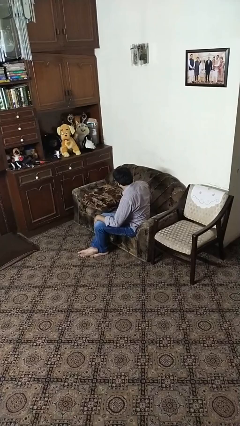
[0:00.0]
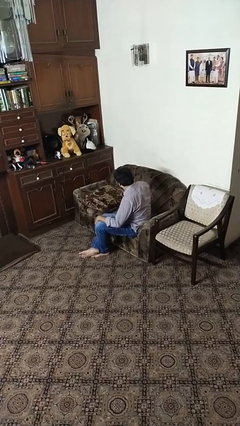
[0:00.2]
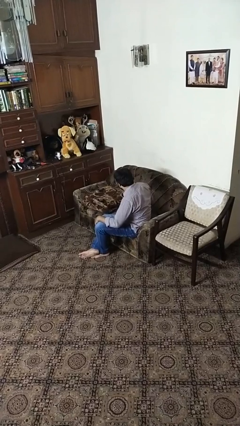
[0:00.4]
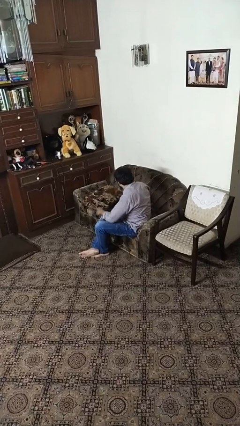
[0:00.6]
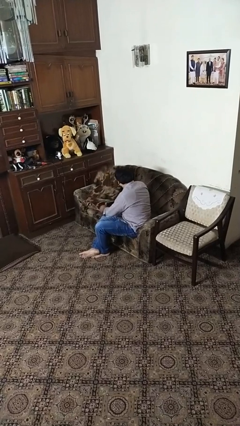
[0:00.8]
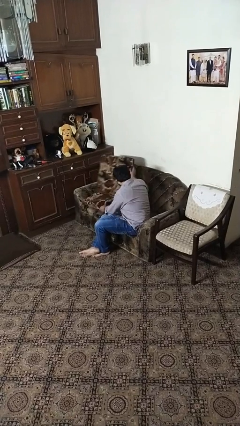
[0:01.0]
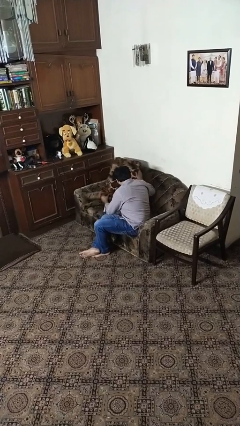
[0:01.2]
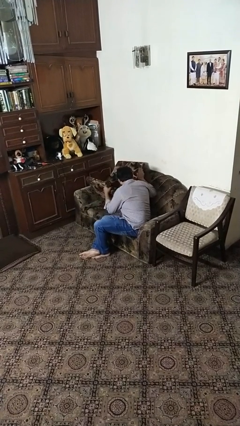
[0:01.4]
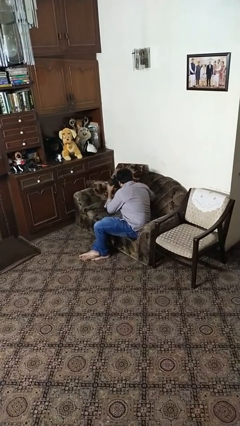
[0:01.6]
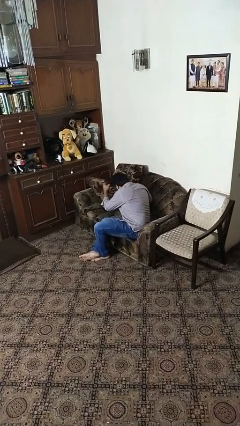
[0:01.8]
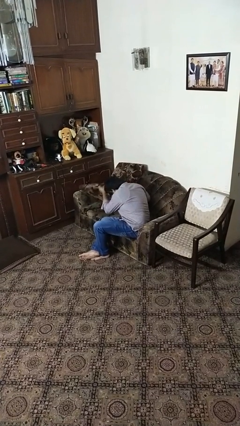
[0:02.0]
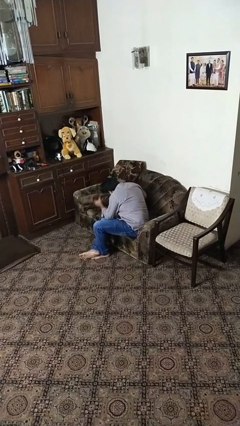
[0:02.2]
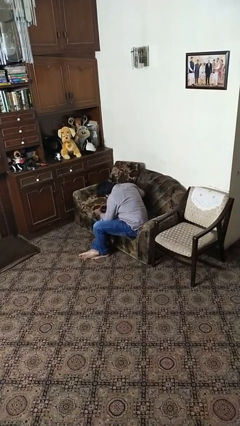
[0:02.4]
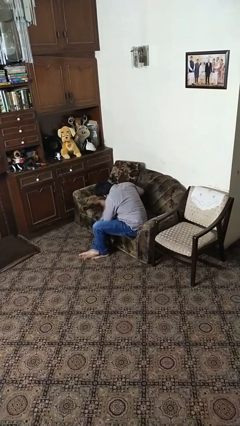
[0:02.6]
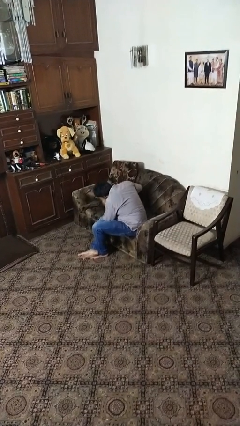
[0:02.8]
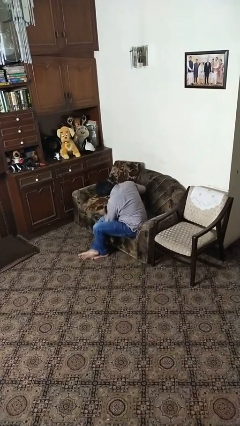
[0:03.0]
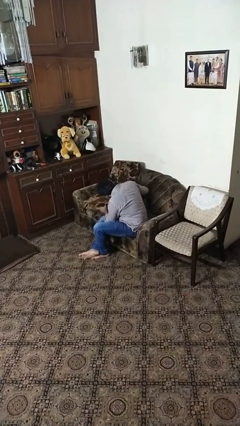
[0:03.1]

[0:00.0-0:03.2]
person searches in couch

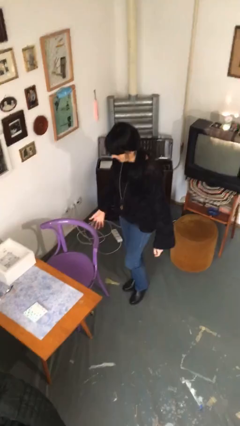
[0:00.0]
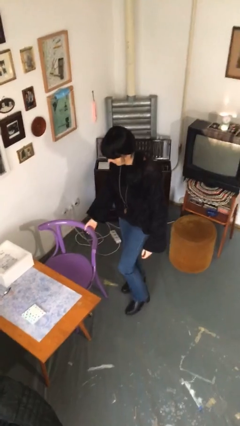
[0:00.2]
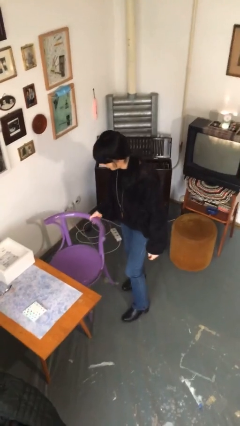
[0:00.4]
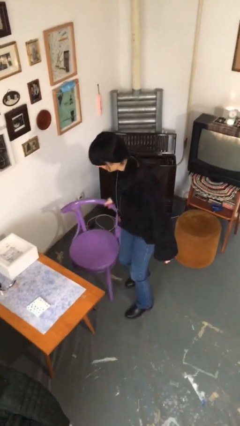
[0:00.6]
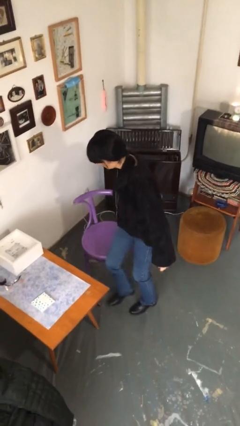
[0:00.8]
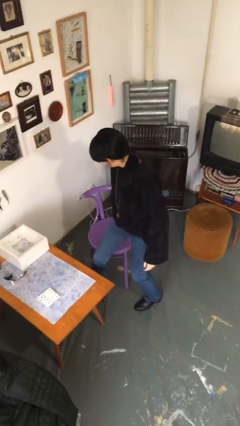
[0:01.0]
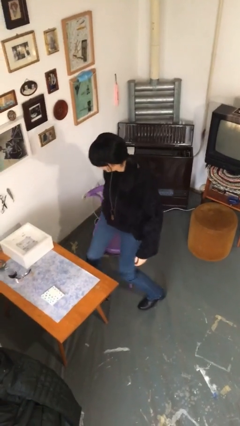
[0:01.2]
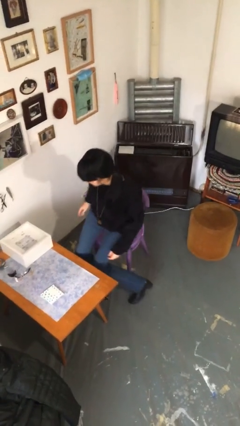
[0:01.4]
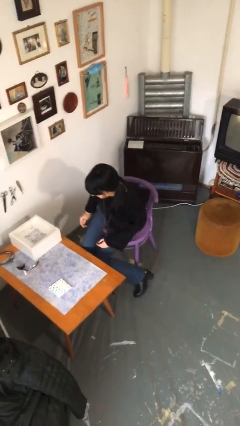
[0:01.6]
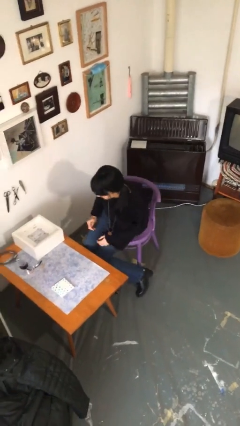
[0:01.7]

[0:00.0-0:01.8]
person sits down

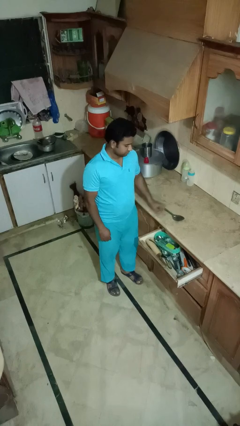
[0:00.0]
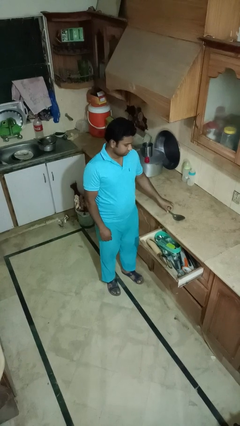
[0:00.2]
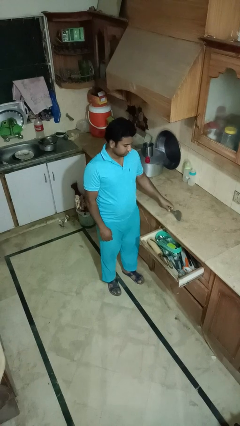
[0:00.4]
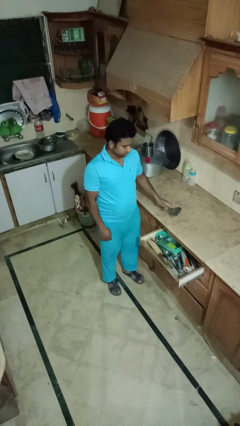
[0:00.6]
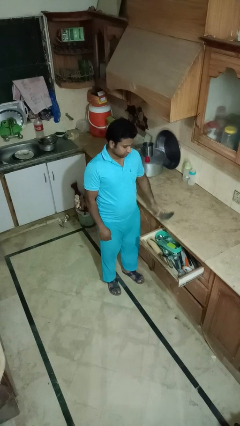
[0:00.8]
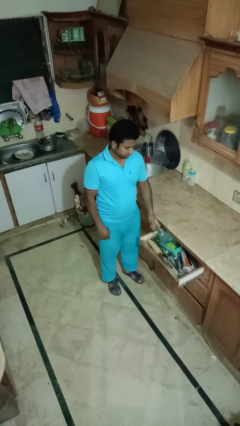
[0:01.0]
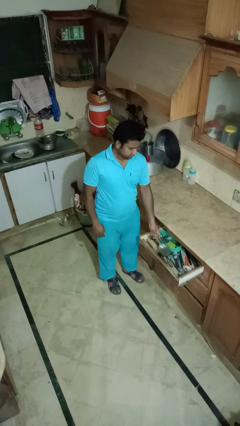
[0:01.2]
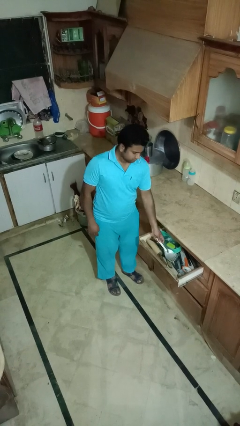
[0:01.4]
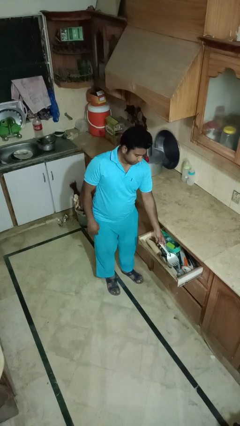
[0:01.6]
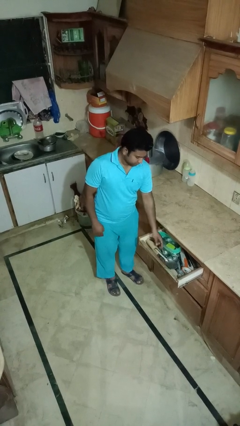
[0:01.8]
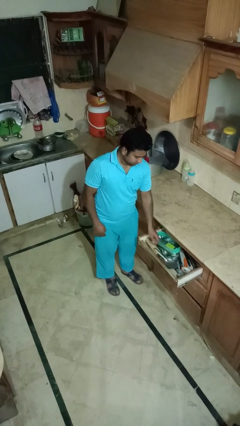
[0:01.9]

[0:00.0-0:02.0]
person puts object into kitchen drawer

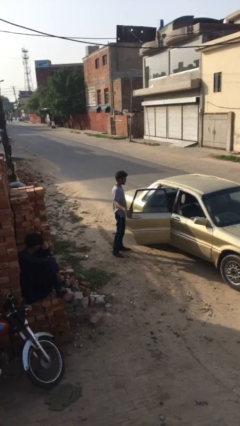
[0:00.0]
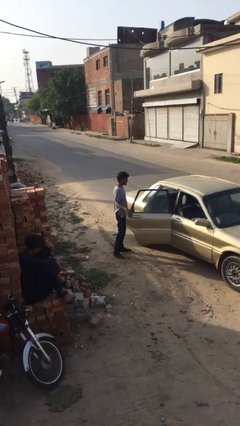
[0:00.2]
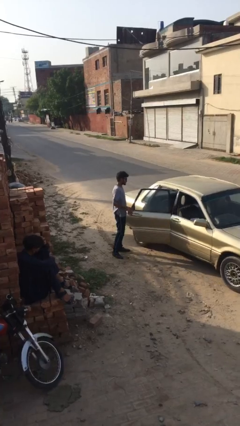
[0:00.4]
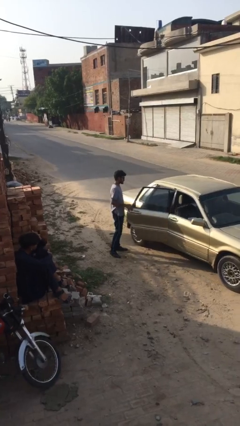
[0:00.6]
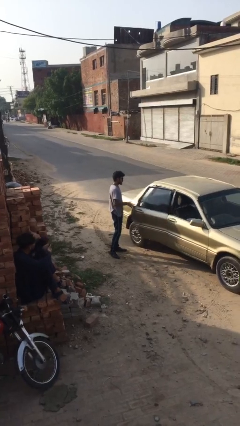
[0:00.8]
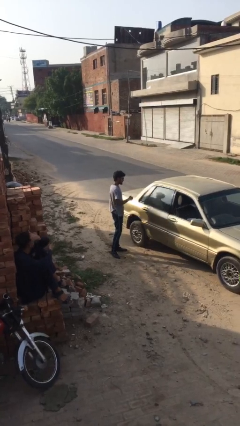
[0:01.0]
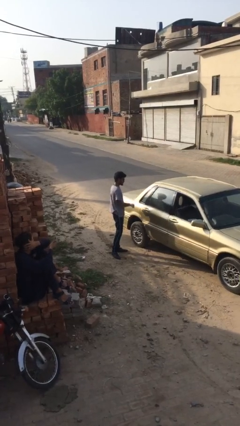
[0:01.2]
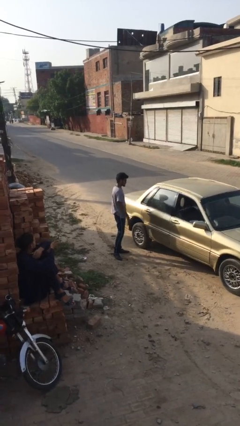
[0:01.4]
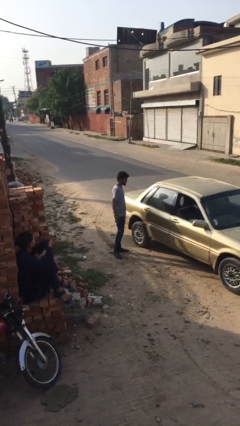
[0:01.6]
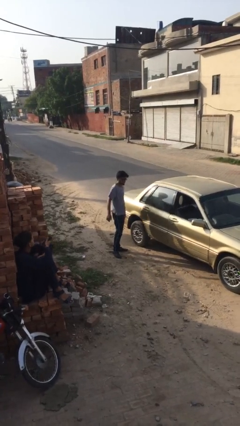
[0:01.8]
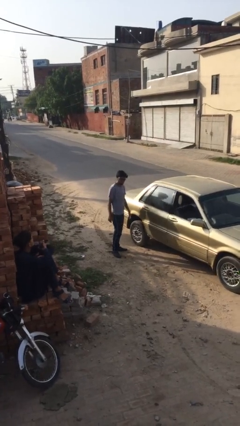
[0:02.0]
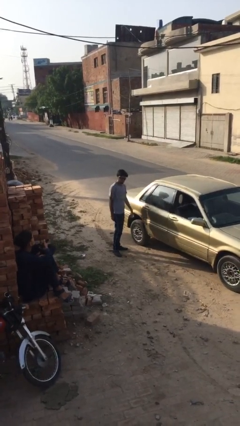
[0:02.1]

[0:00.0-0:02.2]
person closes car door

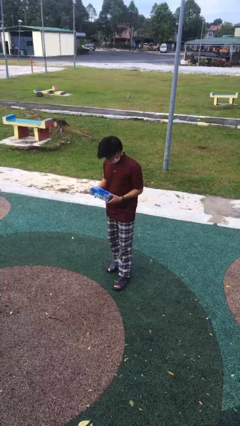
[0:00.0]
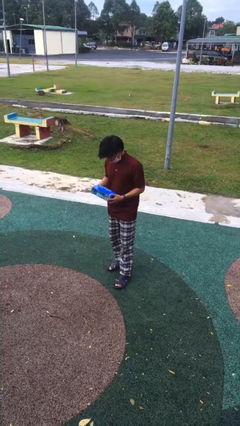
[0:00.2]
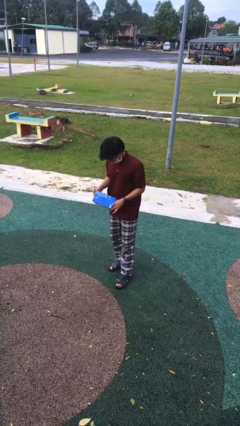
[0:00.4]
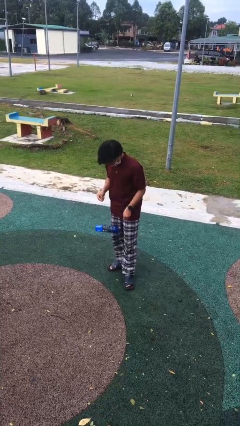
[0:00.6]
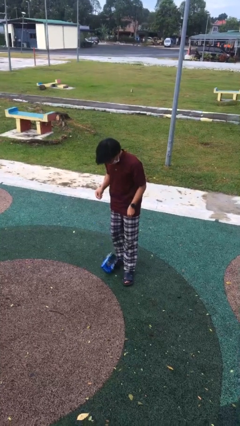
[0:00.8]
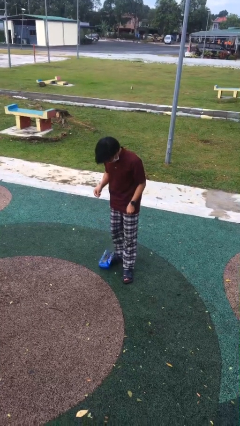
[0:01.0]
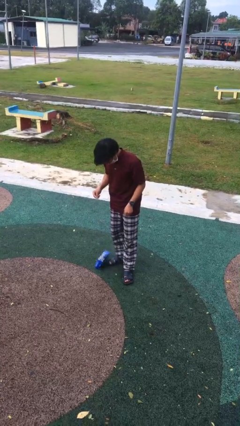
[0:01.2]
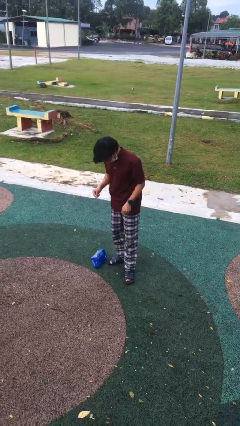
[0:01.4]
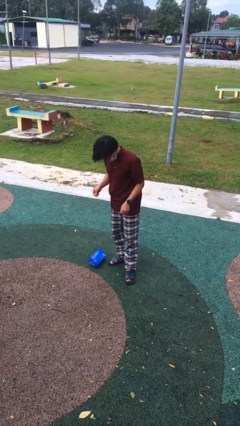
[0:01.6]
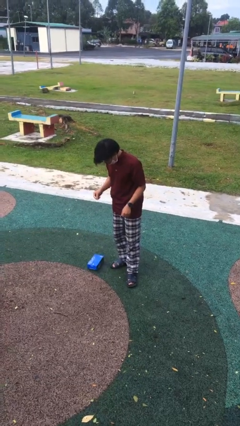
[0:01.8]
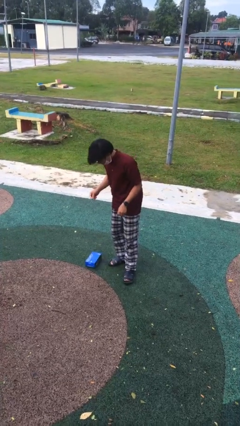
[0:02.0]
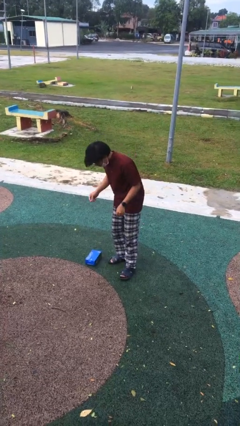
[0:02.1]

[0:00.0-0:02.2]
person drops object

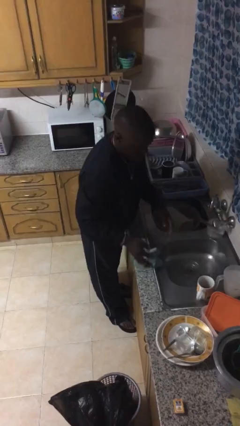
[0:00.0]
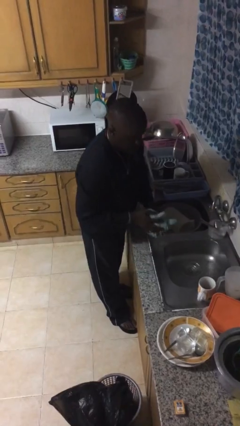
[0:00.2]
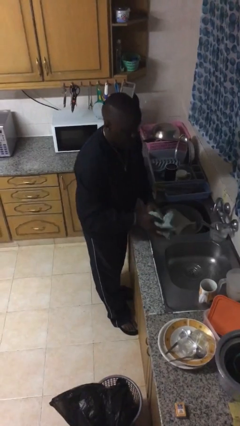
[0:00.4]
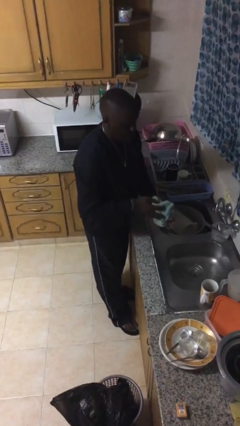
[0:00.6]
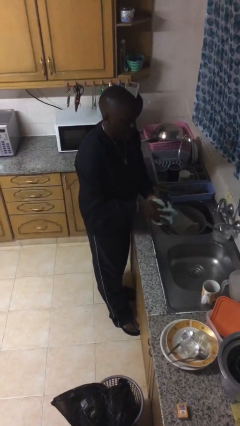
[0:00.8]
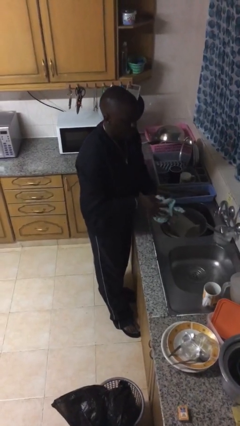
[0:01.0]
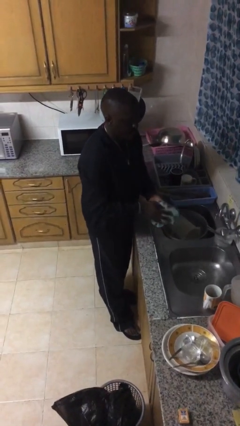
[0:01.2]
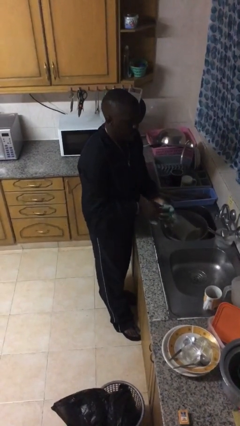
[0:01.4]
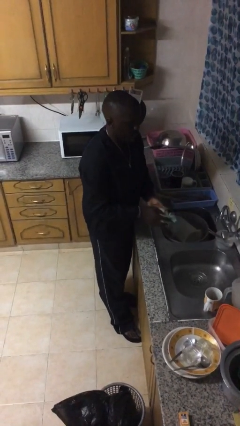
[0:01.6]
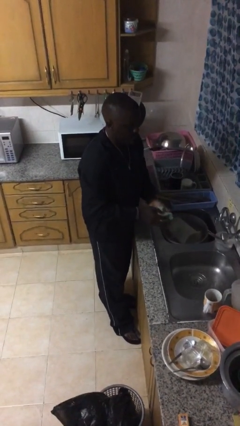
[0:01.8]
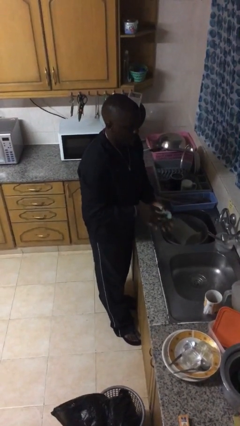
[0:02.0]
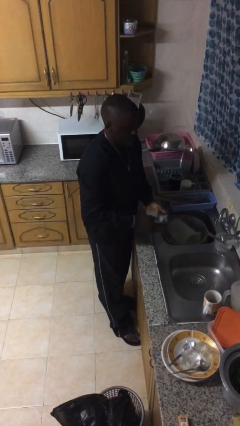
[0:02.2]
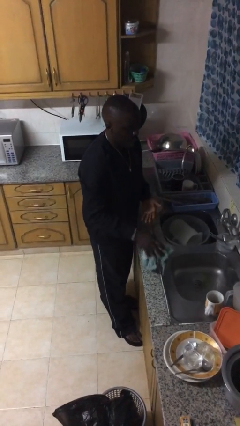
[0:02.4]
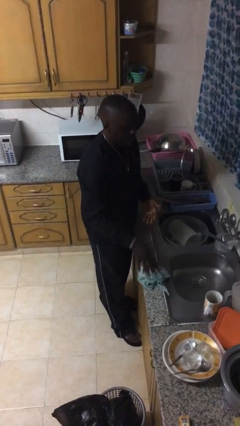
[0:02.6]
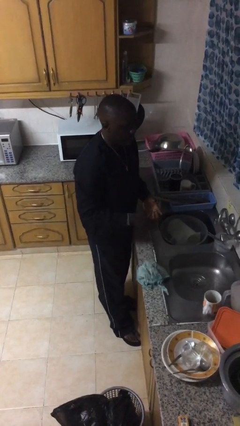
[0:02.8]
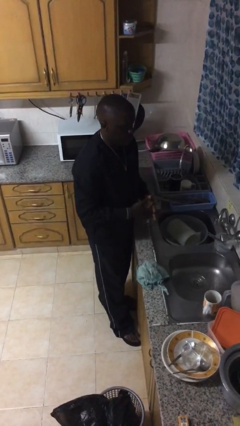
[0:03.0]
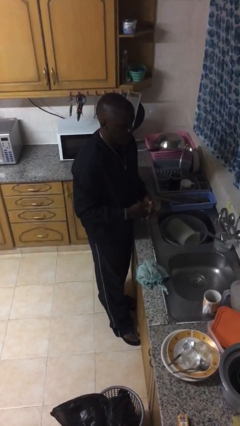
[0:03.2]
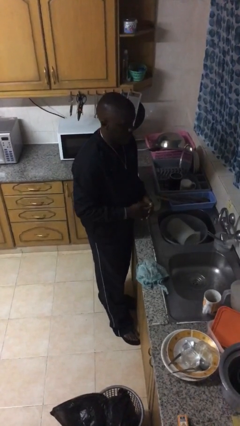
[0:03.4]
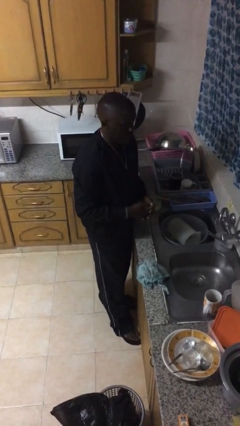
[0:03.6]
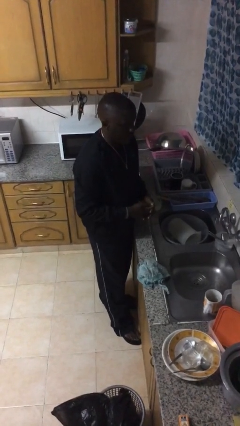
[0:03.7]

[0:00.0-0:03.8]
person dries hands with towel

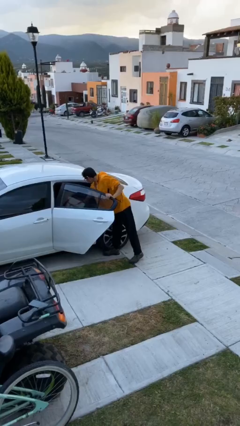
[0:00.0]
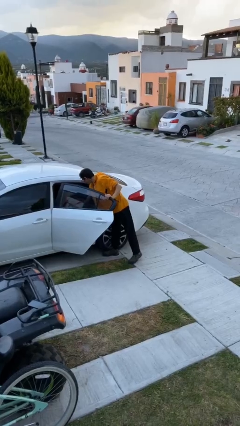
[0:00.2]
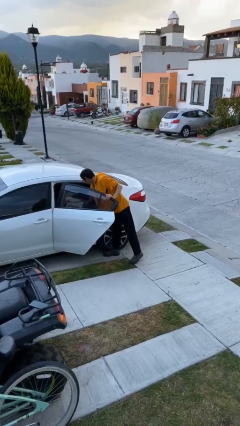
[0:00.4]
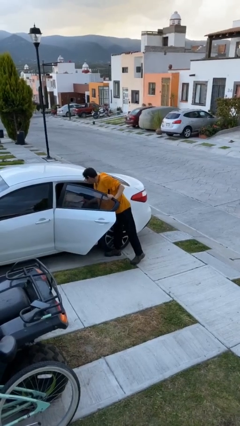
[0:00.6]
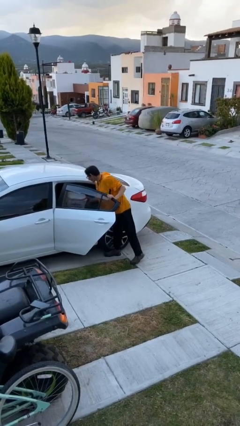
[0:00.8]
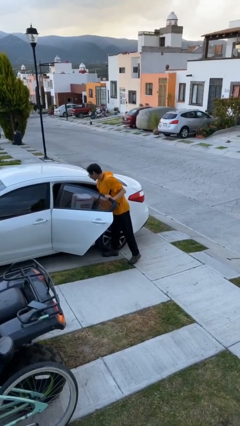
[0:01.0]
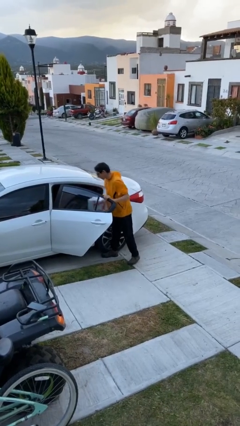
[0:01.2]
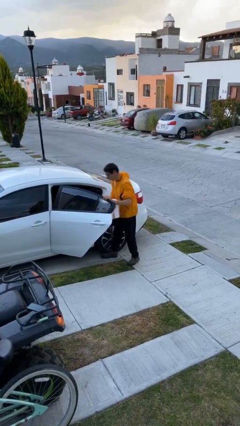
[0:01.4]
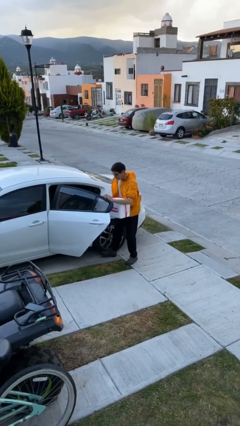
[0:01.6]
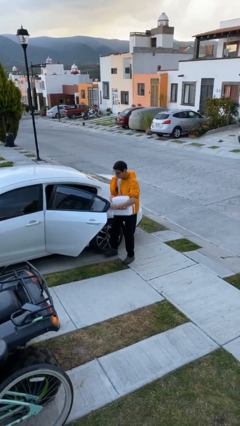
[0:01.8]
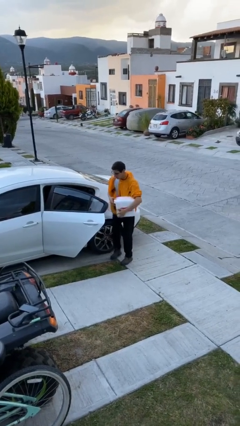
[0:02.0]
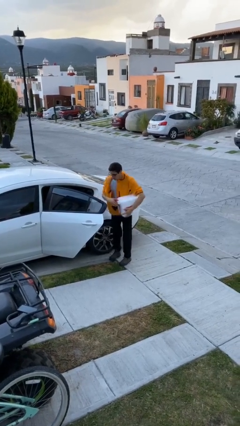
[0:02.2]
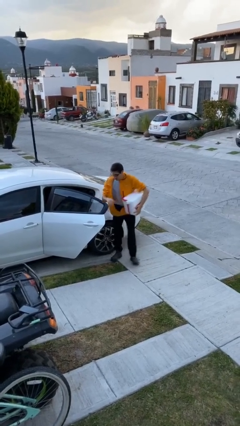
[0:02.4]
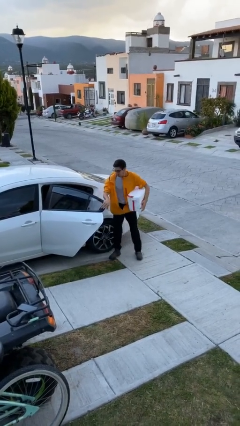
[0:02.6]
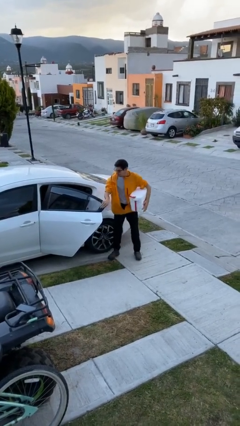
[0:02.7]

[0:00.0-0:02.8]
person unloads car
